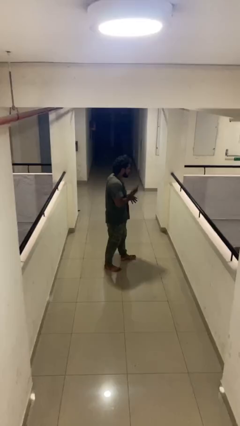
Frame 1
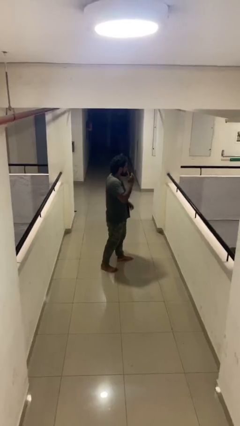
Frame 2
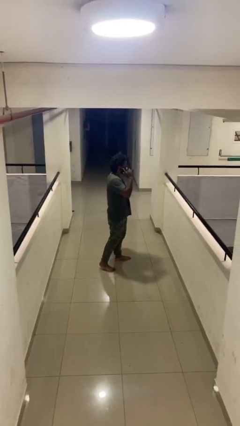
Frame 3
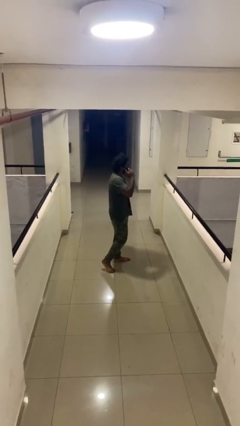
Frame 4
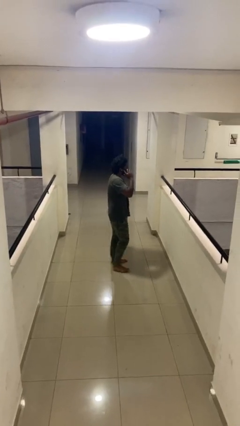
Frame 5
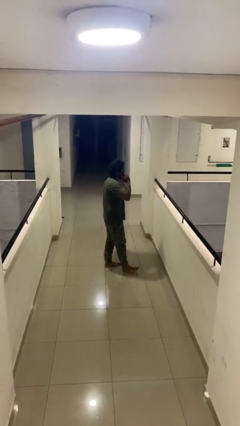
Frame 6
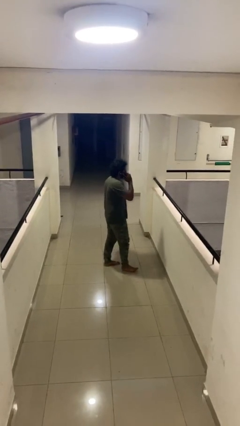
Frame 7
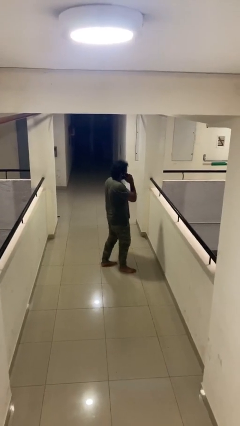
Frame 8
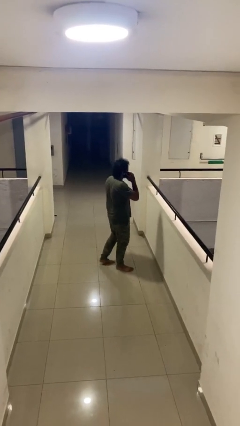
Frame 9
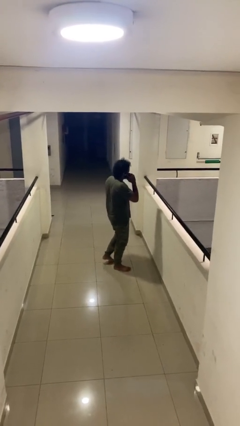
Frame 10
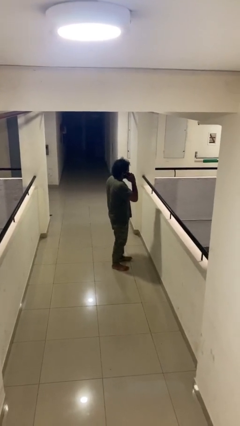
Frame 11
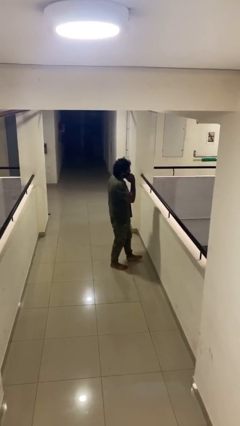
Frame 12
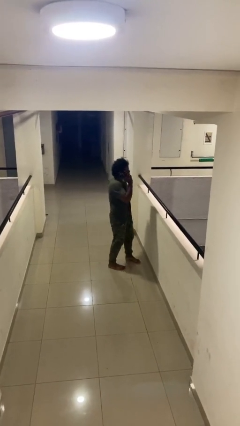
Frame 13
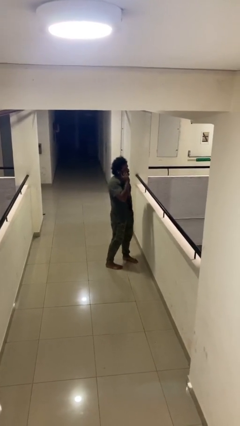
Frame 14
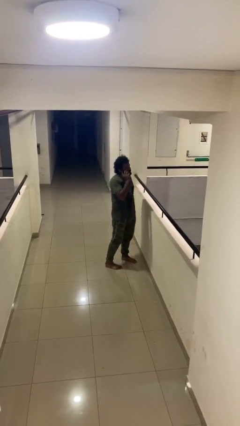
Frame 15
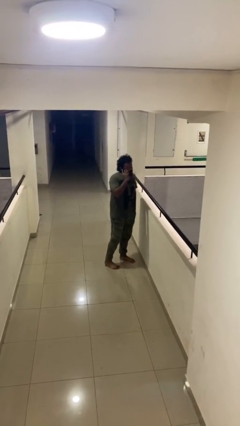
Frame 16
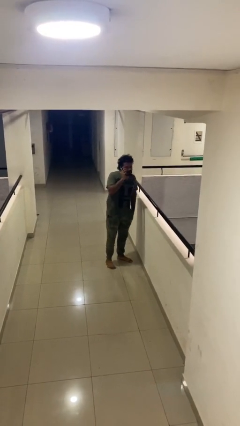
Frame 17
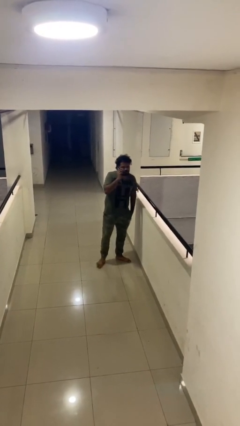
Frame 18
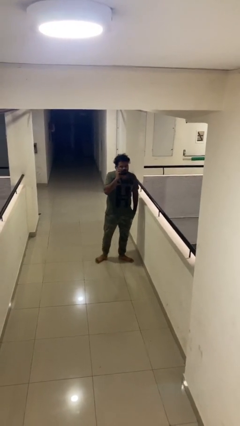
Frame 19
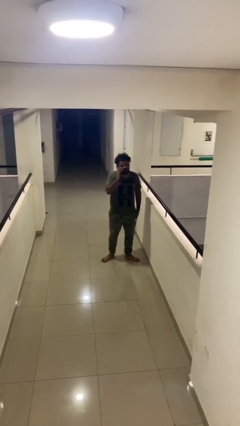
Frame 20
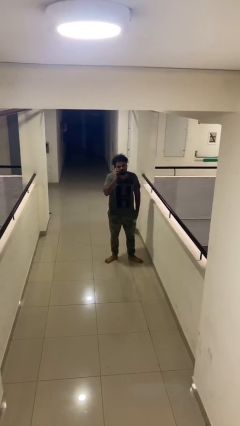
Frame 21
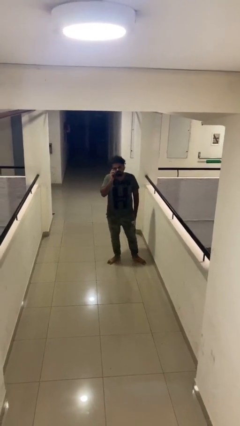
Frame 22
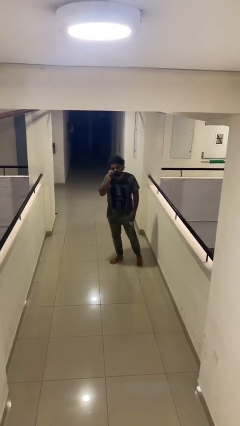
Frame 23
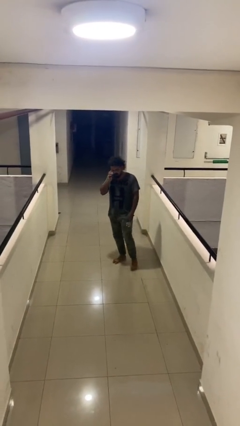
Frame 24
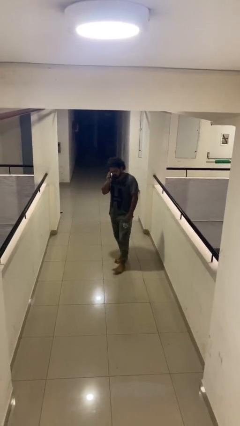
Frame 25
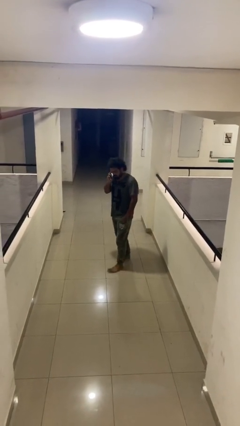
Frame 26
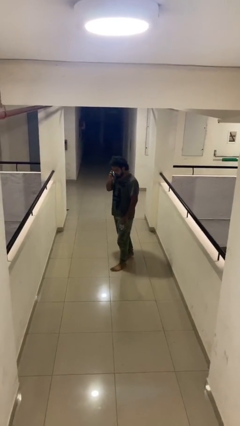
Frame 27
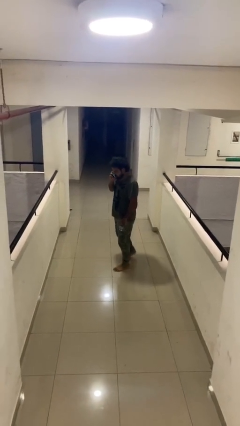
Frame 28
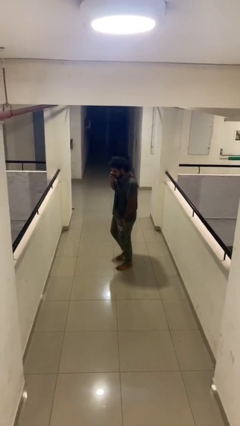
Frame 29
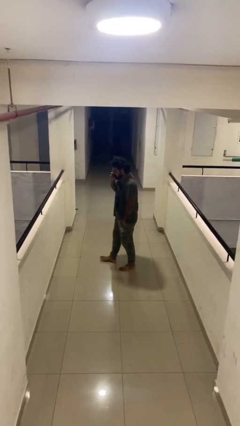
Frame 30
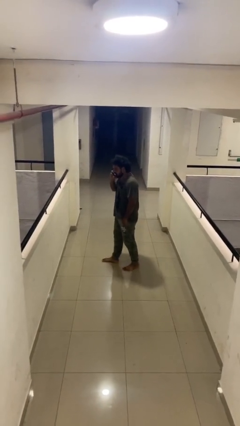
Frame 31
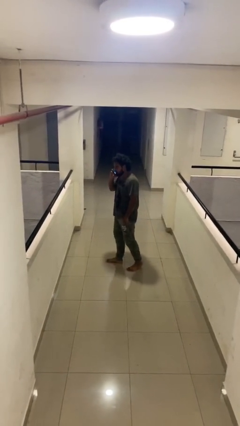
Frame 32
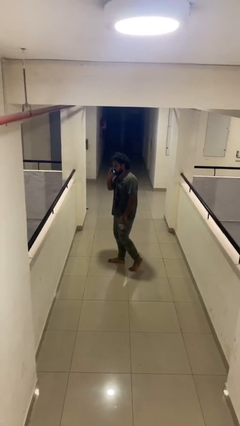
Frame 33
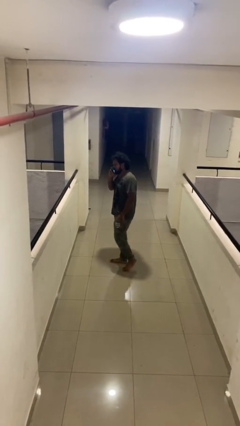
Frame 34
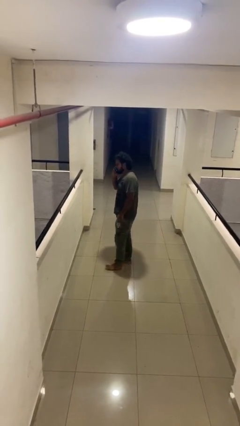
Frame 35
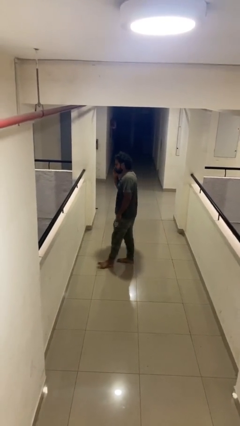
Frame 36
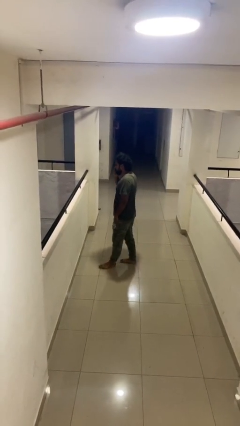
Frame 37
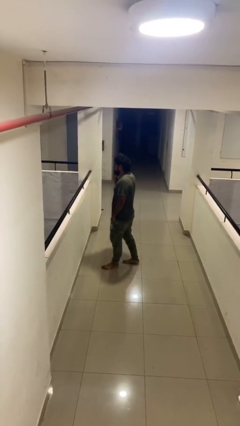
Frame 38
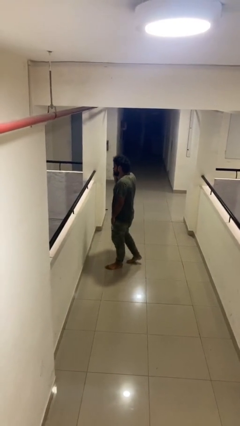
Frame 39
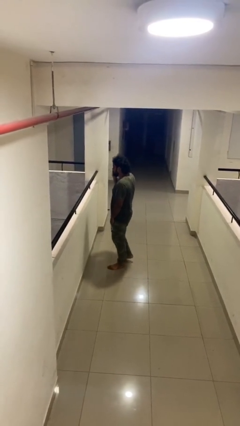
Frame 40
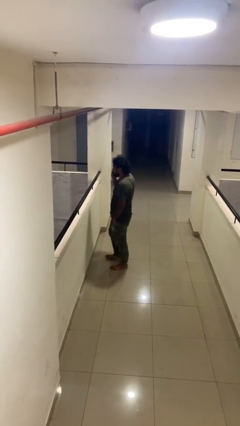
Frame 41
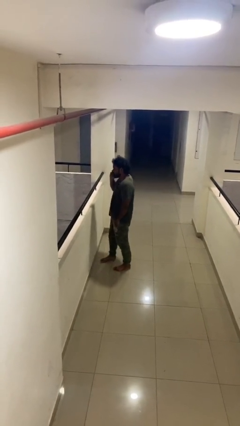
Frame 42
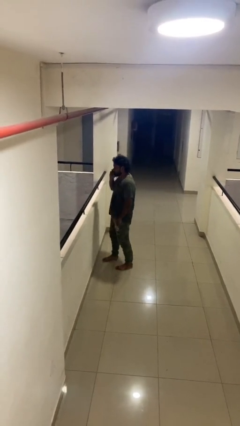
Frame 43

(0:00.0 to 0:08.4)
person talks on phone

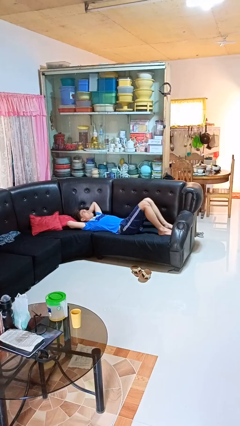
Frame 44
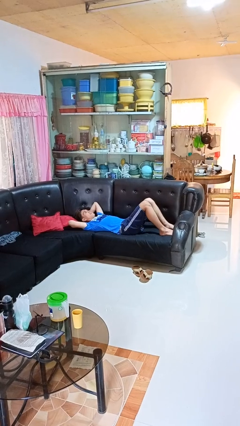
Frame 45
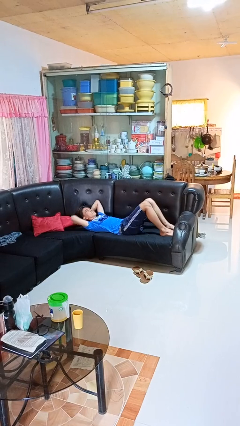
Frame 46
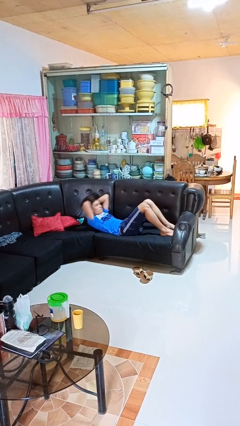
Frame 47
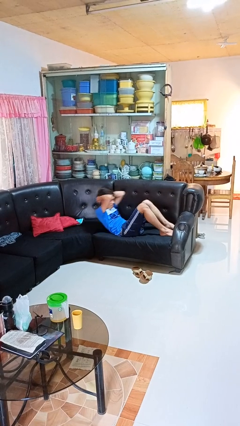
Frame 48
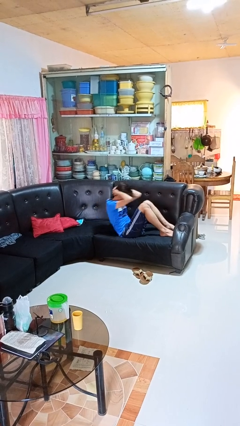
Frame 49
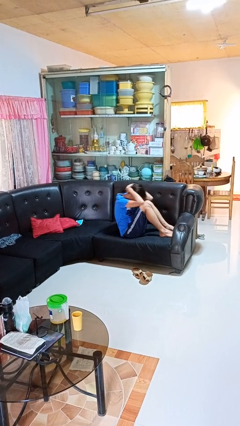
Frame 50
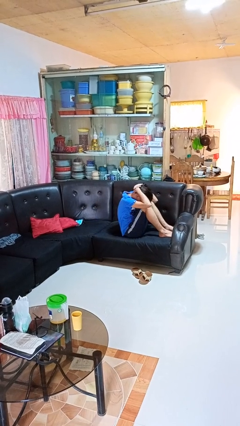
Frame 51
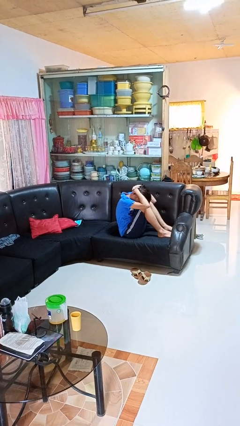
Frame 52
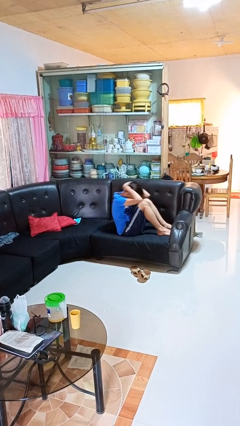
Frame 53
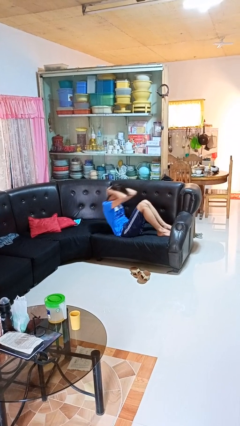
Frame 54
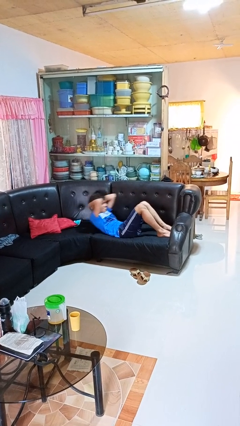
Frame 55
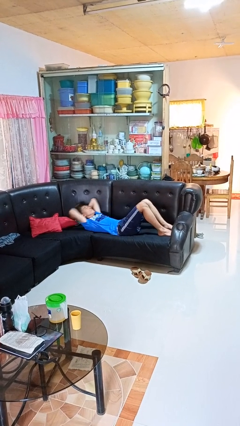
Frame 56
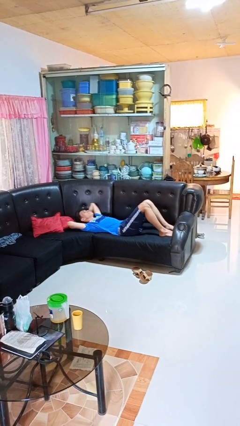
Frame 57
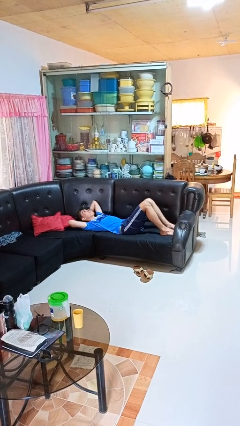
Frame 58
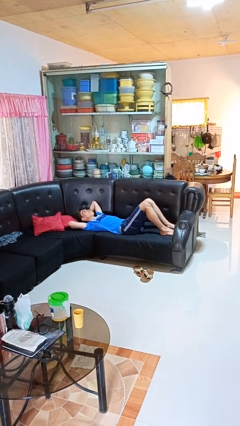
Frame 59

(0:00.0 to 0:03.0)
person exercises with situp

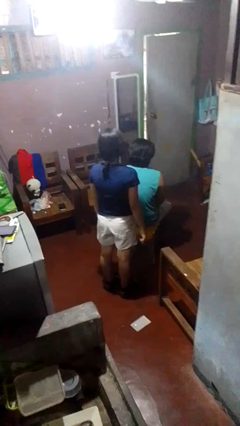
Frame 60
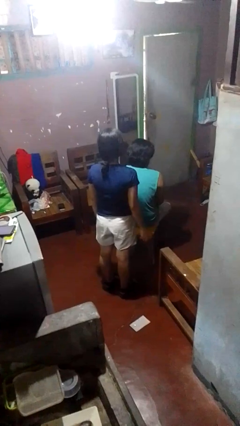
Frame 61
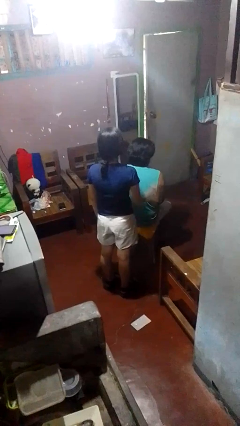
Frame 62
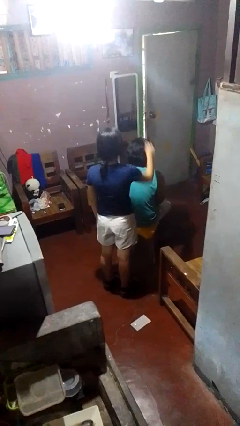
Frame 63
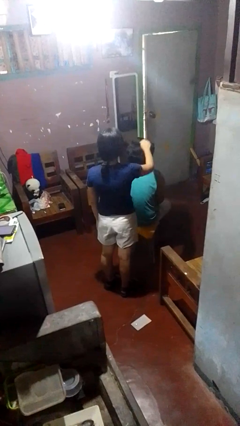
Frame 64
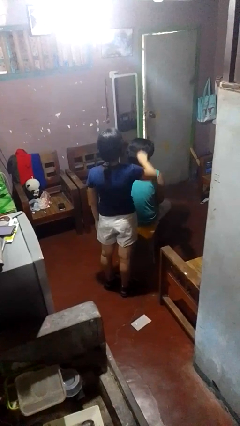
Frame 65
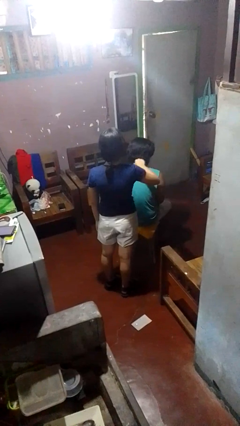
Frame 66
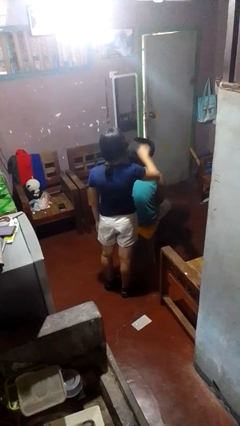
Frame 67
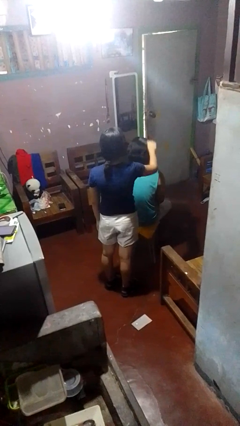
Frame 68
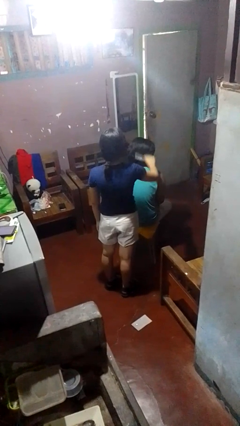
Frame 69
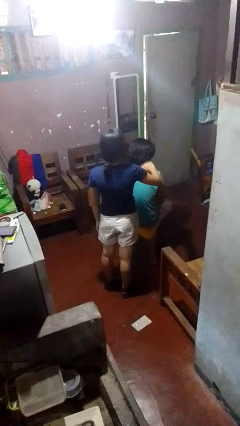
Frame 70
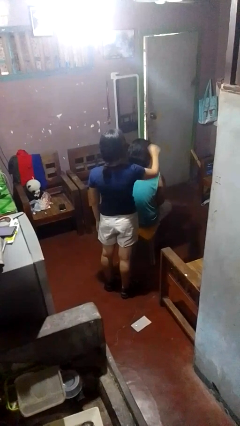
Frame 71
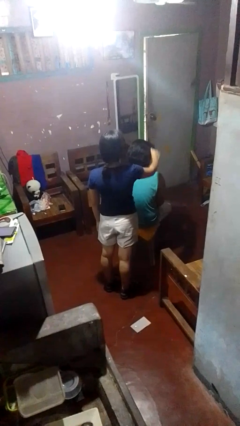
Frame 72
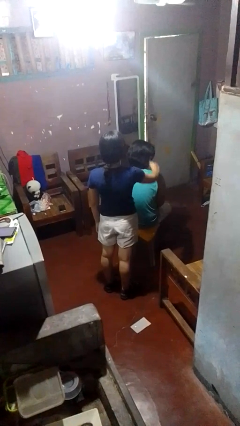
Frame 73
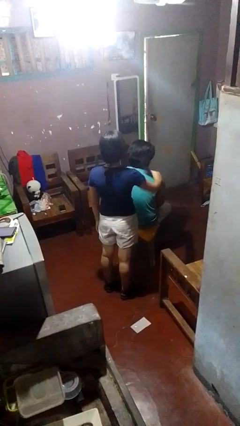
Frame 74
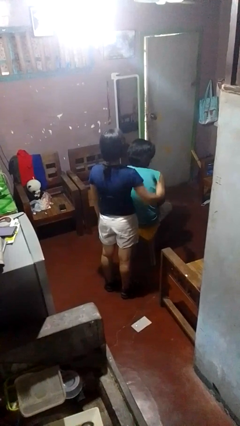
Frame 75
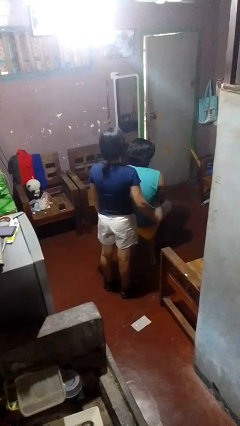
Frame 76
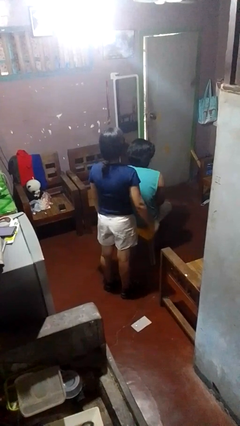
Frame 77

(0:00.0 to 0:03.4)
person brushes hair of person

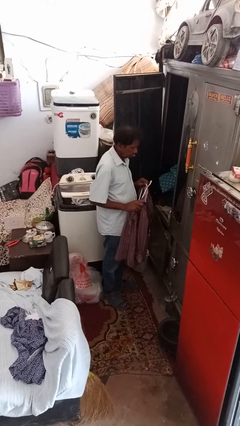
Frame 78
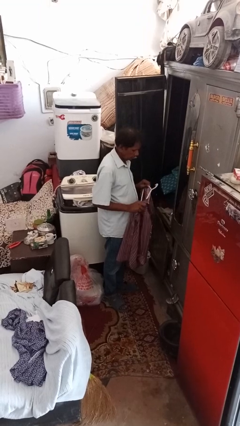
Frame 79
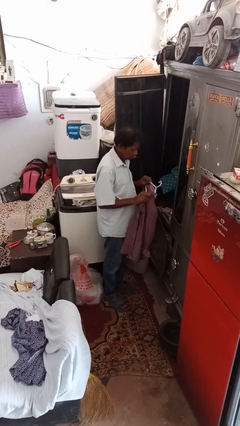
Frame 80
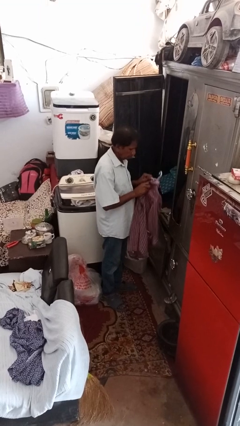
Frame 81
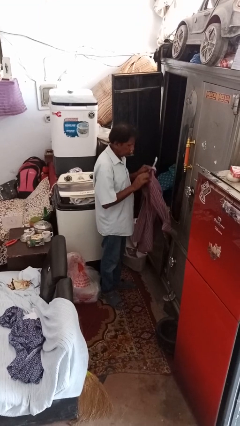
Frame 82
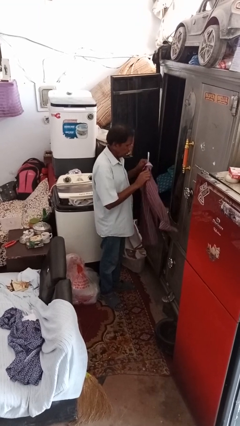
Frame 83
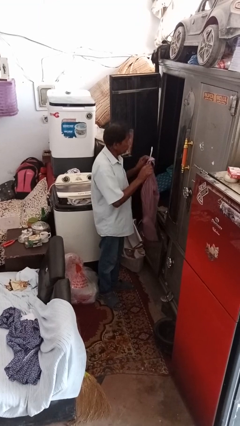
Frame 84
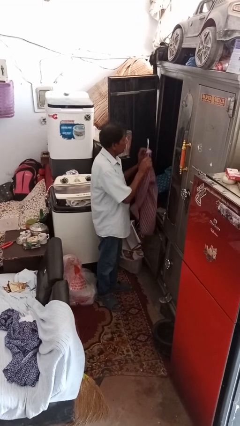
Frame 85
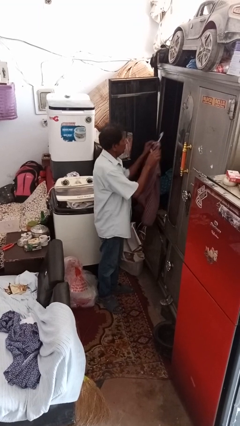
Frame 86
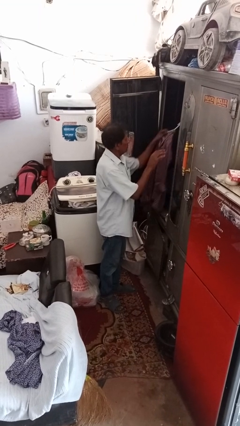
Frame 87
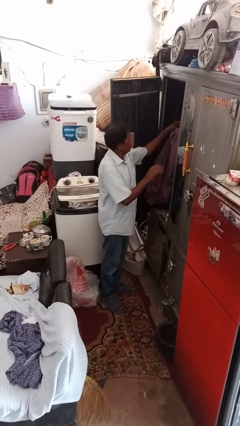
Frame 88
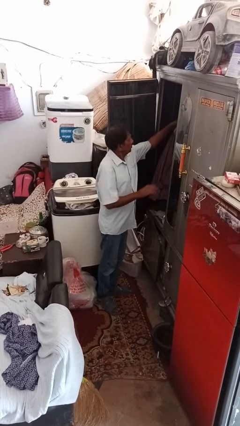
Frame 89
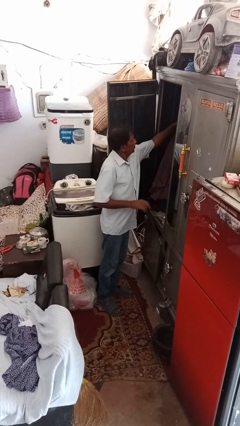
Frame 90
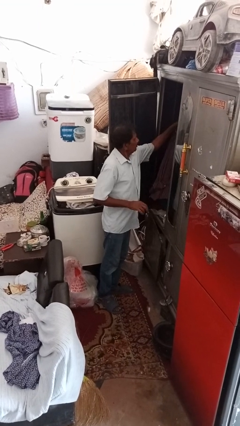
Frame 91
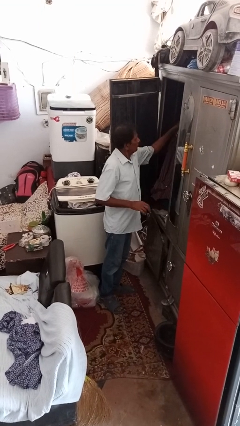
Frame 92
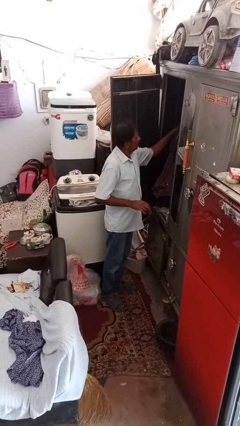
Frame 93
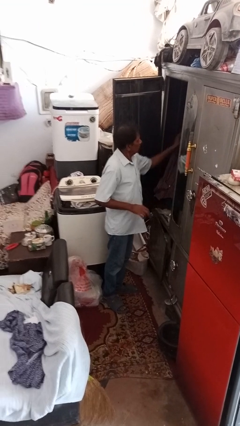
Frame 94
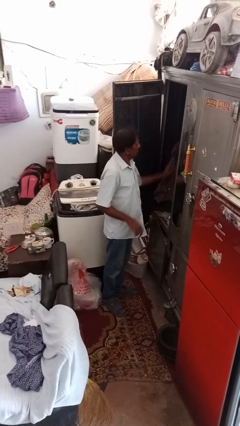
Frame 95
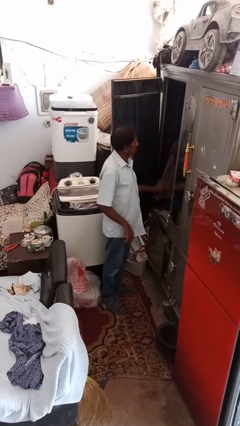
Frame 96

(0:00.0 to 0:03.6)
person puts clothes into closet
